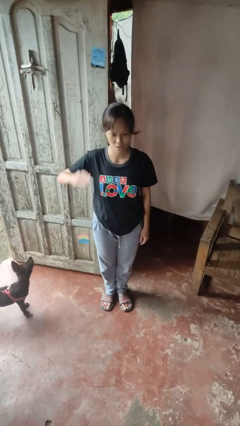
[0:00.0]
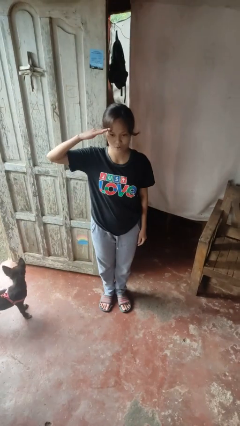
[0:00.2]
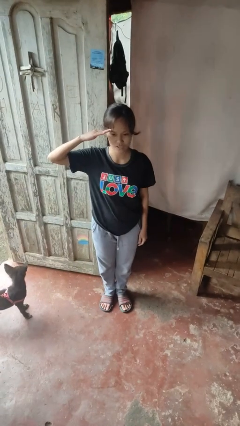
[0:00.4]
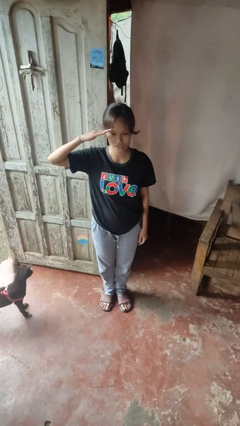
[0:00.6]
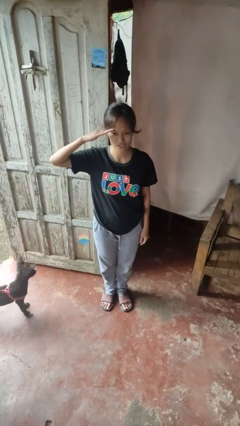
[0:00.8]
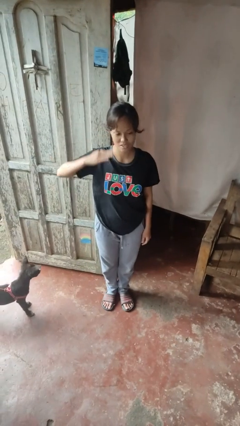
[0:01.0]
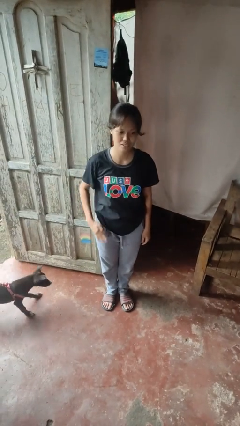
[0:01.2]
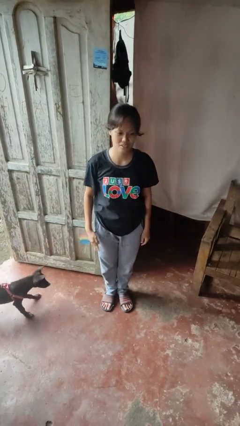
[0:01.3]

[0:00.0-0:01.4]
person salutes

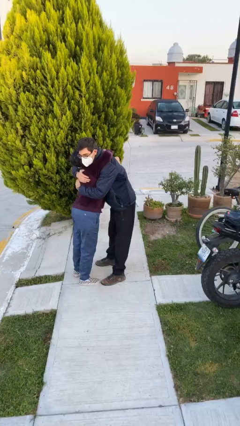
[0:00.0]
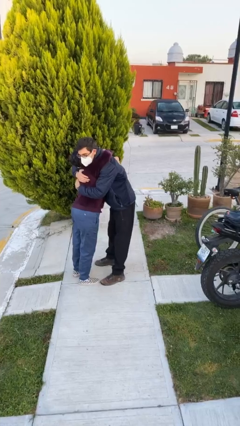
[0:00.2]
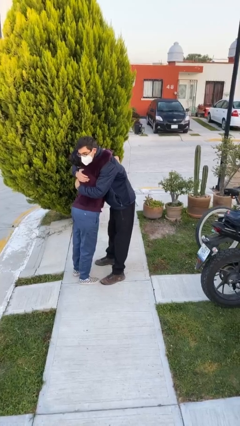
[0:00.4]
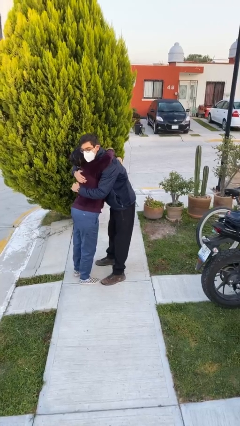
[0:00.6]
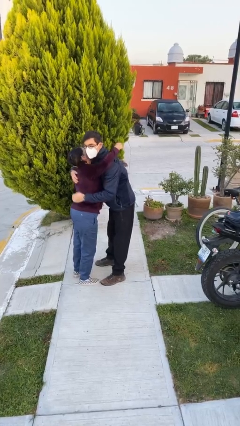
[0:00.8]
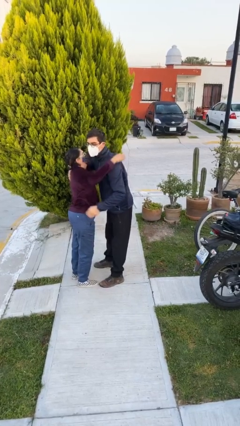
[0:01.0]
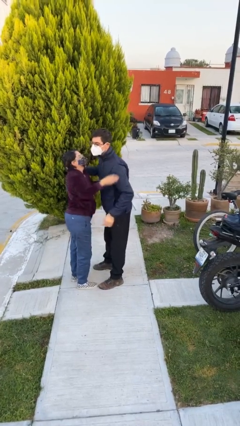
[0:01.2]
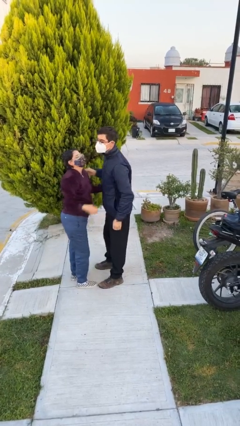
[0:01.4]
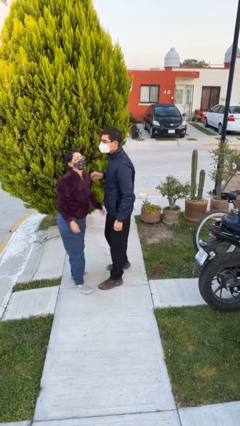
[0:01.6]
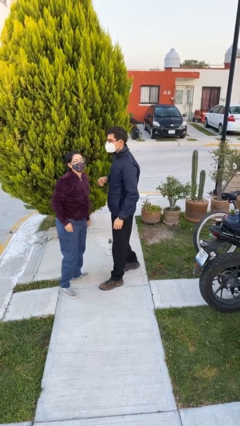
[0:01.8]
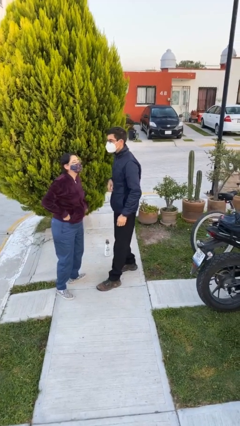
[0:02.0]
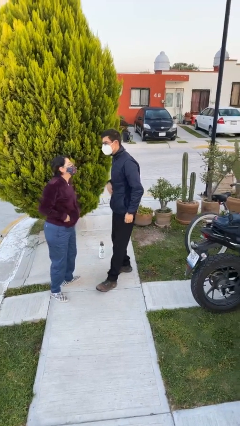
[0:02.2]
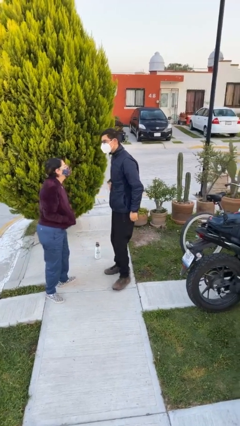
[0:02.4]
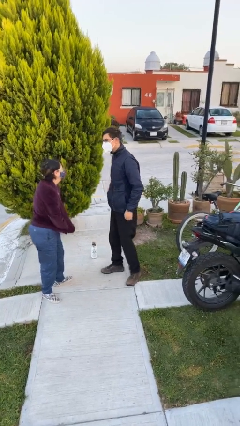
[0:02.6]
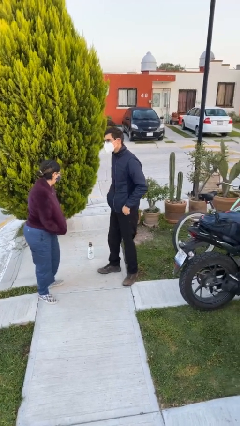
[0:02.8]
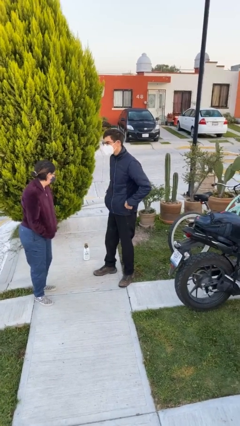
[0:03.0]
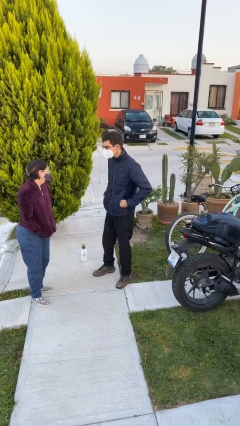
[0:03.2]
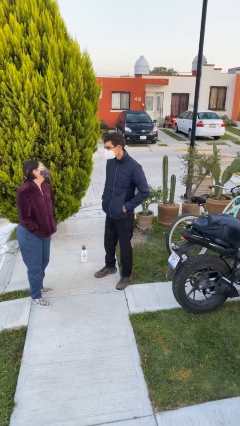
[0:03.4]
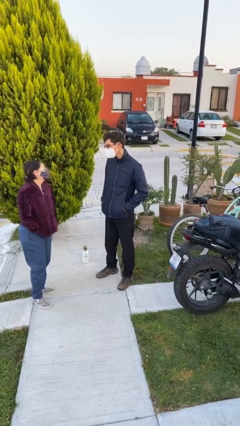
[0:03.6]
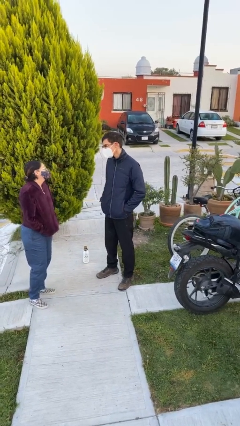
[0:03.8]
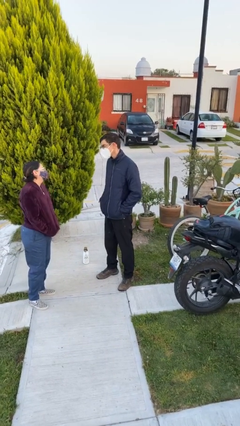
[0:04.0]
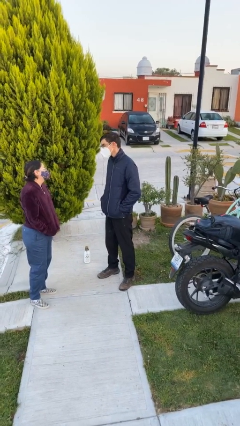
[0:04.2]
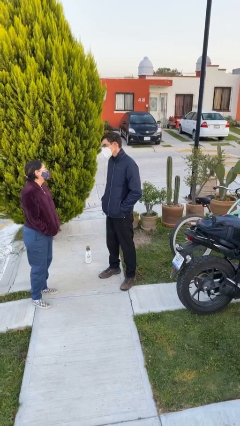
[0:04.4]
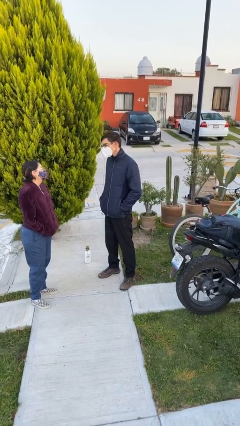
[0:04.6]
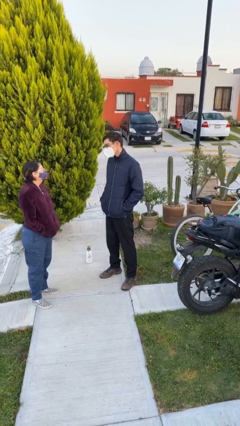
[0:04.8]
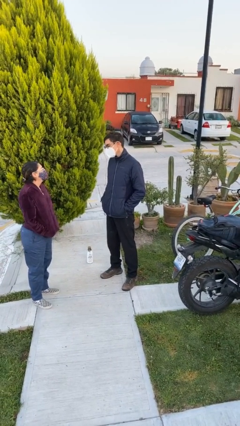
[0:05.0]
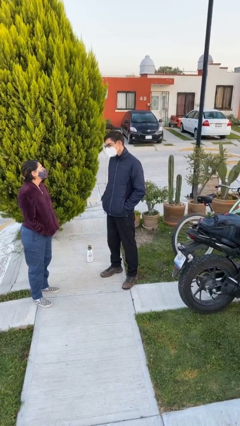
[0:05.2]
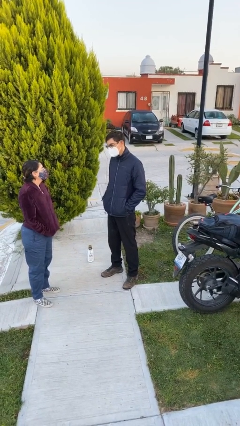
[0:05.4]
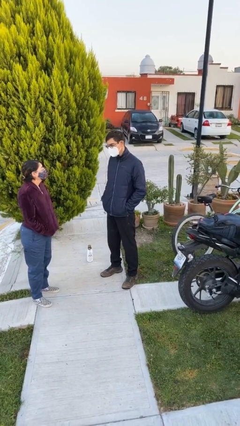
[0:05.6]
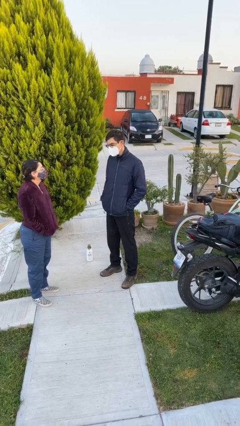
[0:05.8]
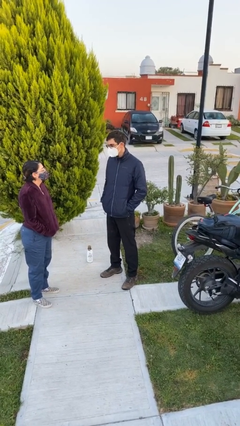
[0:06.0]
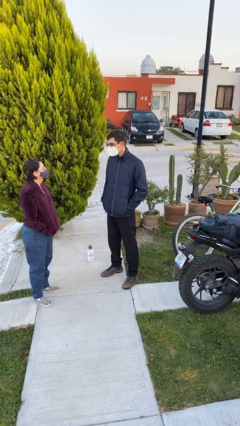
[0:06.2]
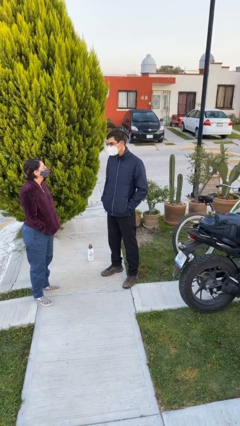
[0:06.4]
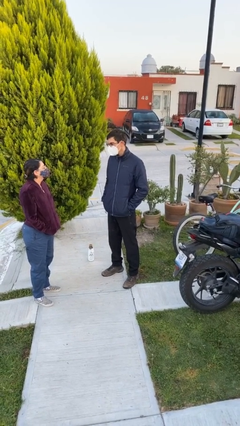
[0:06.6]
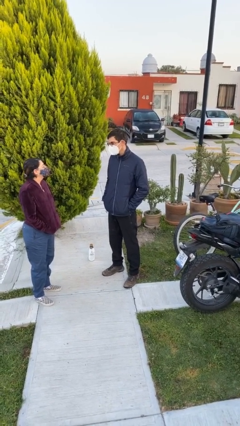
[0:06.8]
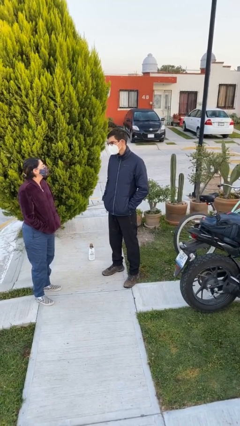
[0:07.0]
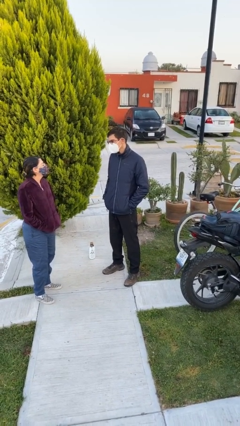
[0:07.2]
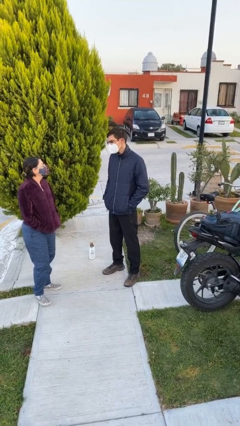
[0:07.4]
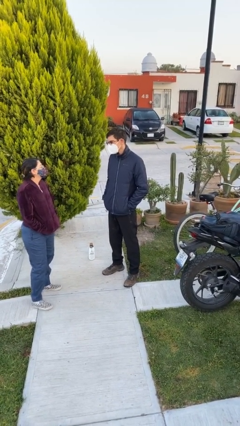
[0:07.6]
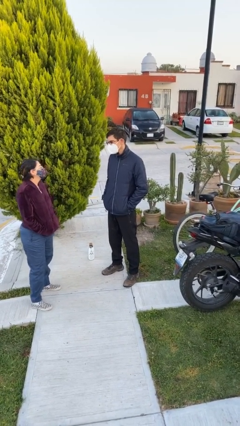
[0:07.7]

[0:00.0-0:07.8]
person talks to person

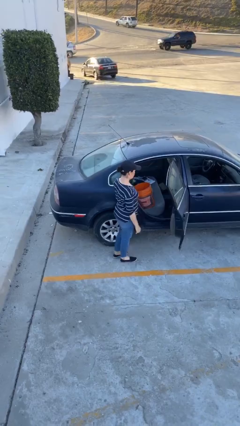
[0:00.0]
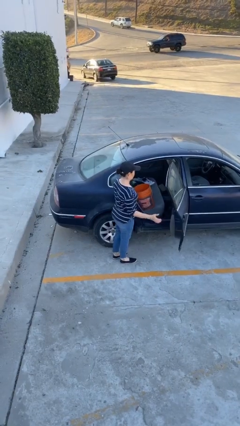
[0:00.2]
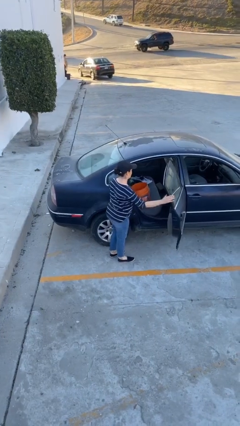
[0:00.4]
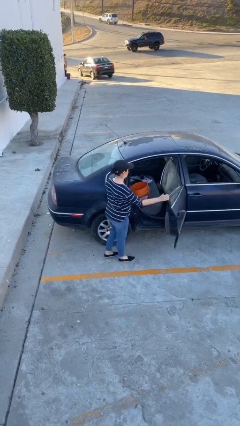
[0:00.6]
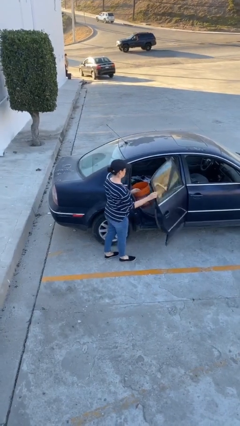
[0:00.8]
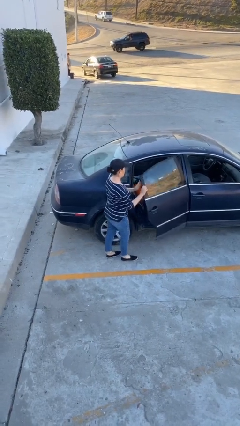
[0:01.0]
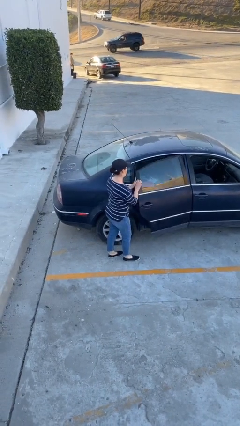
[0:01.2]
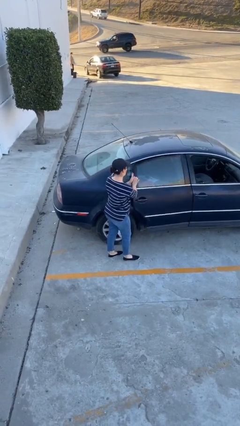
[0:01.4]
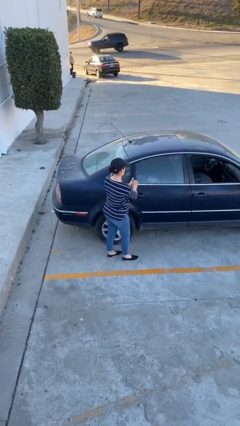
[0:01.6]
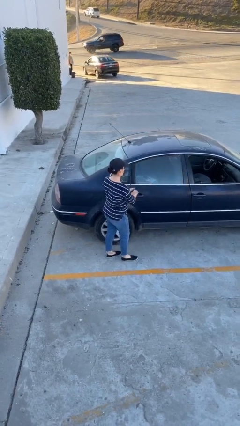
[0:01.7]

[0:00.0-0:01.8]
person closes car door

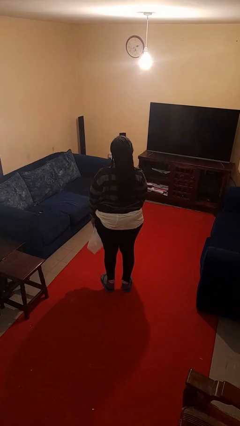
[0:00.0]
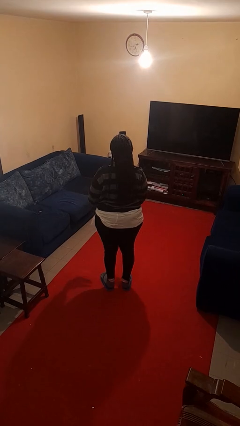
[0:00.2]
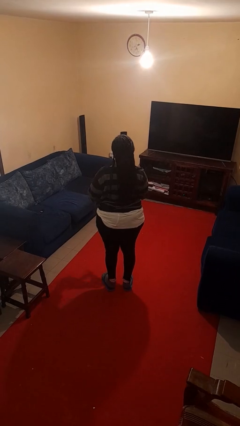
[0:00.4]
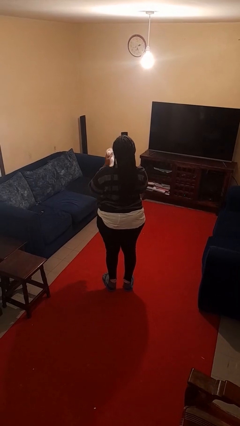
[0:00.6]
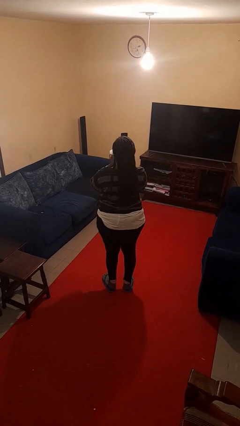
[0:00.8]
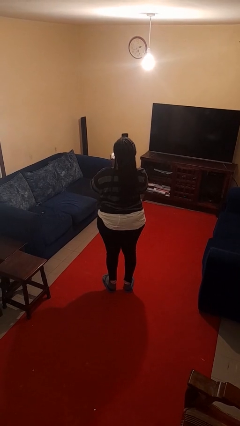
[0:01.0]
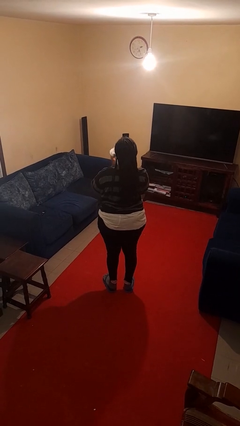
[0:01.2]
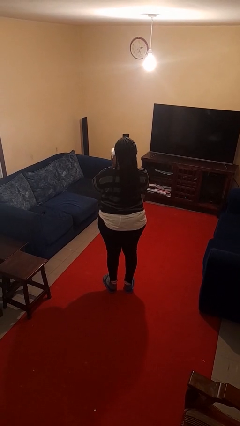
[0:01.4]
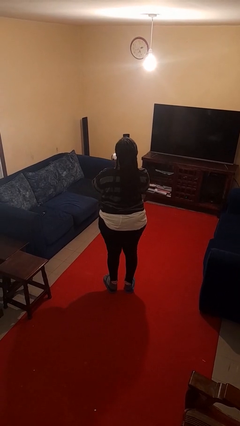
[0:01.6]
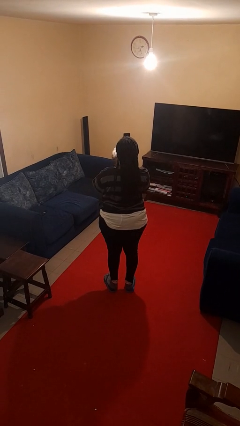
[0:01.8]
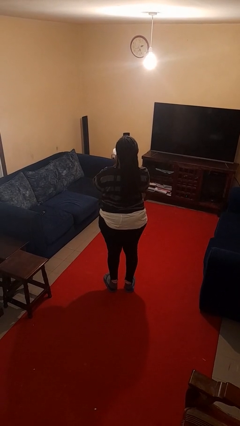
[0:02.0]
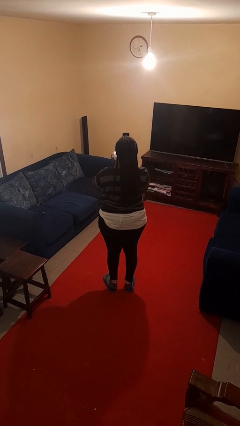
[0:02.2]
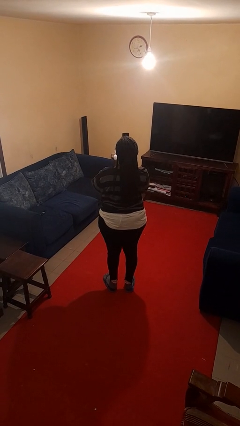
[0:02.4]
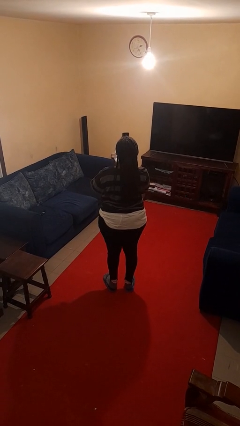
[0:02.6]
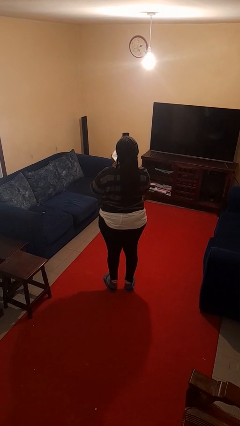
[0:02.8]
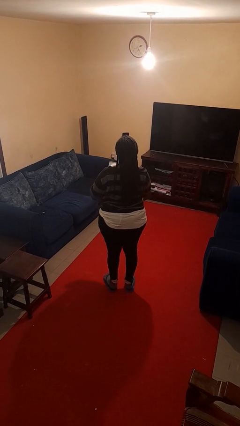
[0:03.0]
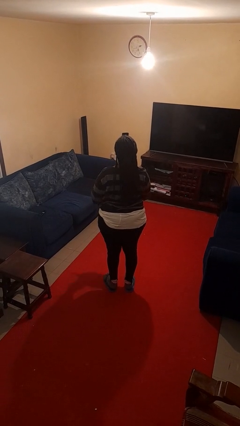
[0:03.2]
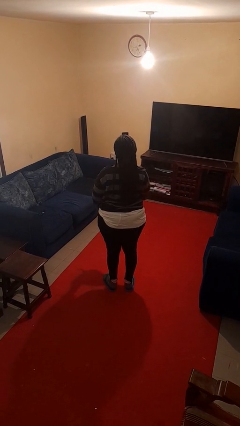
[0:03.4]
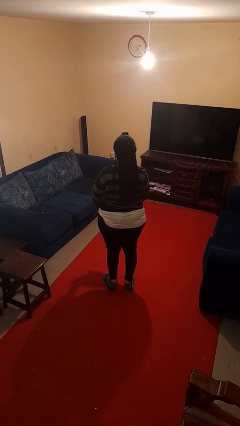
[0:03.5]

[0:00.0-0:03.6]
person wipes mouth with napkin

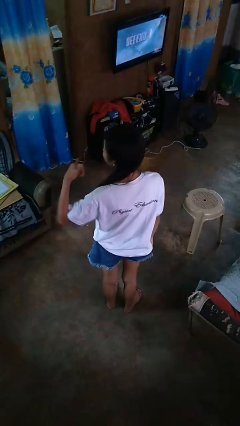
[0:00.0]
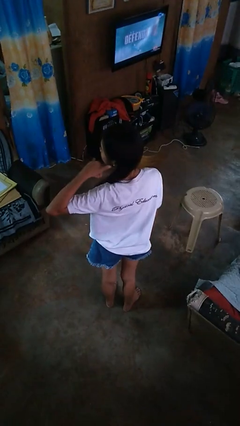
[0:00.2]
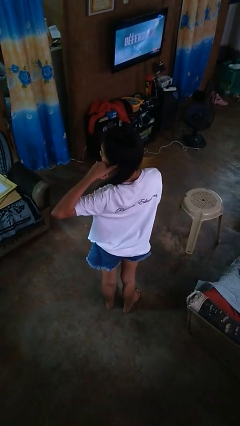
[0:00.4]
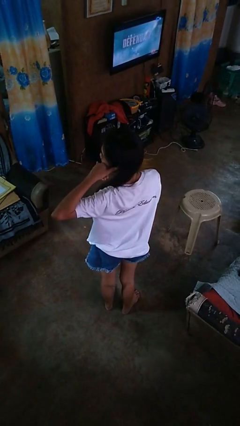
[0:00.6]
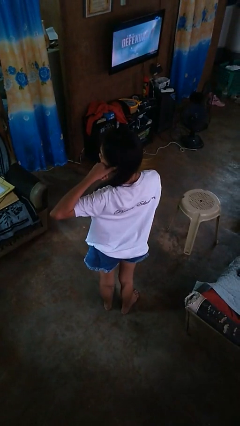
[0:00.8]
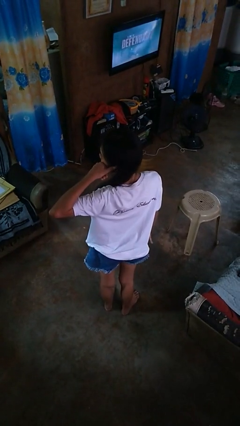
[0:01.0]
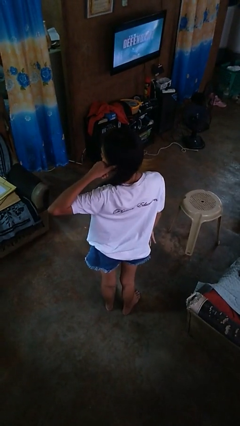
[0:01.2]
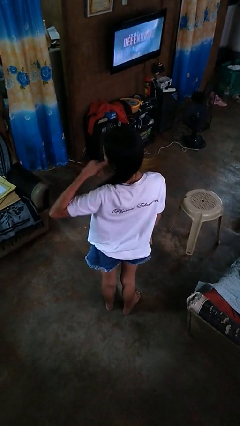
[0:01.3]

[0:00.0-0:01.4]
person gestures call me

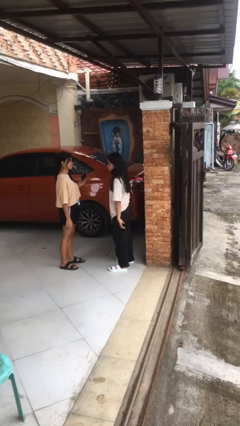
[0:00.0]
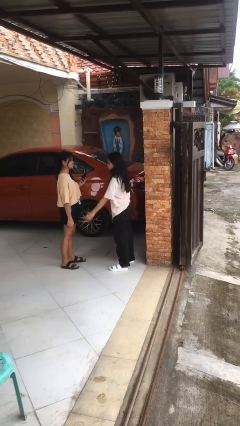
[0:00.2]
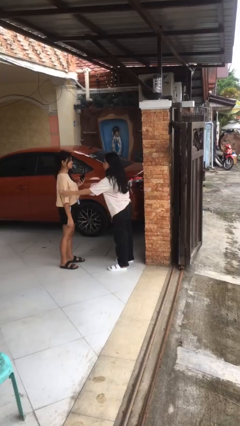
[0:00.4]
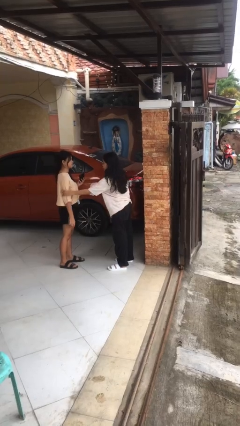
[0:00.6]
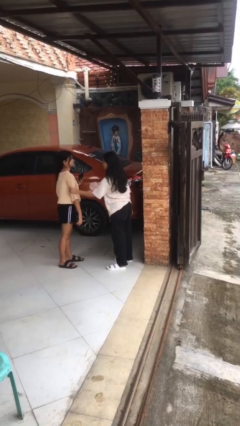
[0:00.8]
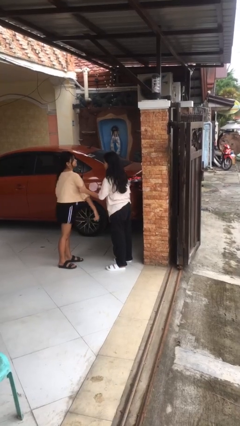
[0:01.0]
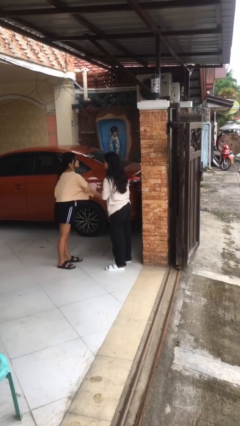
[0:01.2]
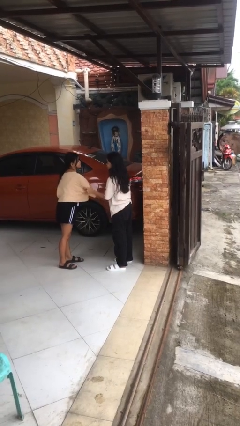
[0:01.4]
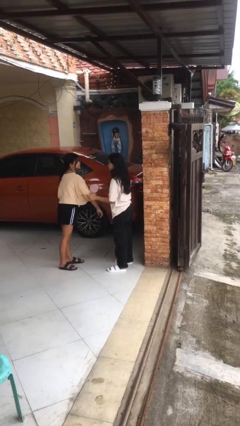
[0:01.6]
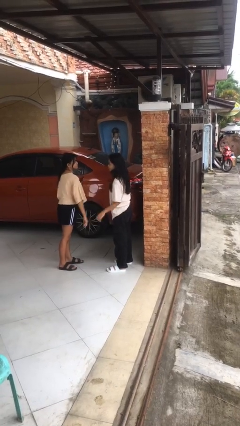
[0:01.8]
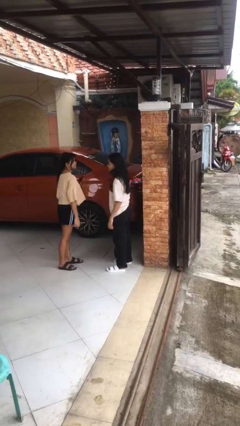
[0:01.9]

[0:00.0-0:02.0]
person grabs person by bicep
